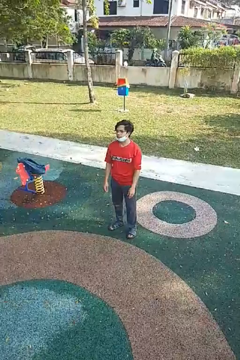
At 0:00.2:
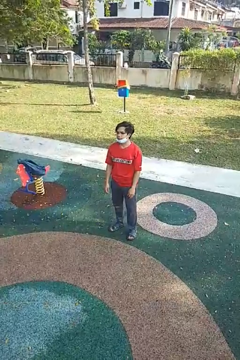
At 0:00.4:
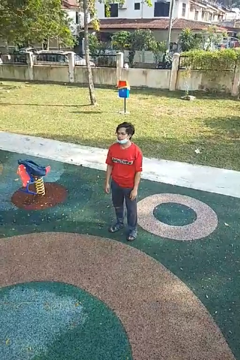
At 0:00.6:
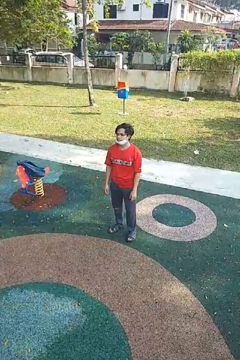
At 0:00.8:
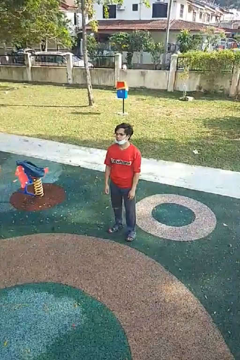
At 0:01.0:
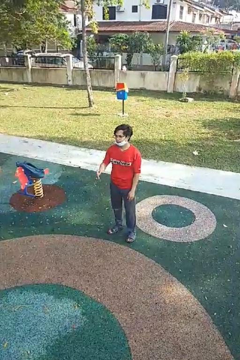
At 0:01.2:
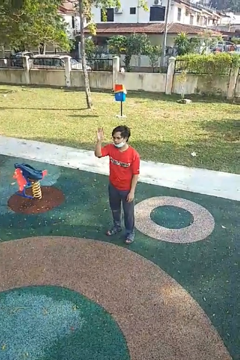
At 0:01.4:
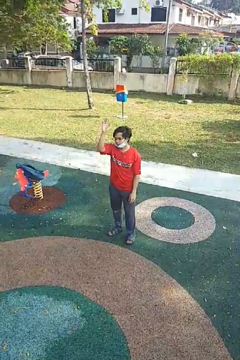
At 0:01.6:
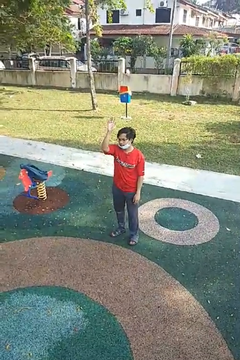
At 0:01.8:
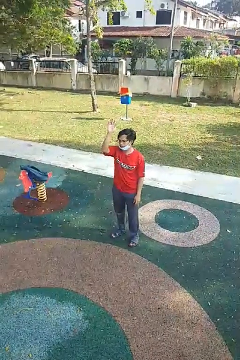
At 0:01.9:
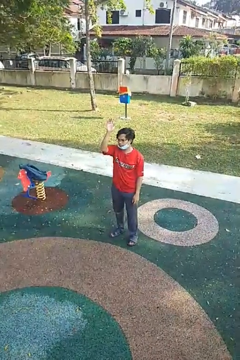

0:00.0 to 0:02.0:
person gestures raise hand

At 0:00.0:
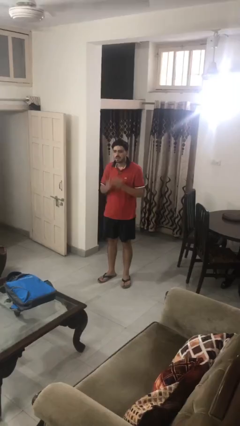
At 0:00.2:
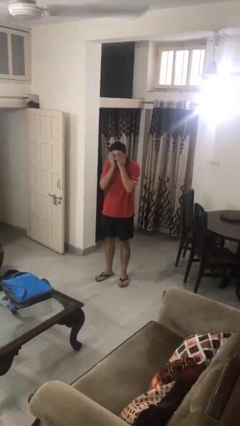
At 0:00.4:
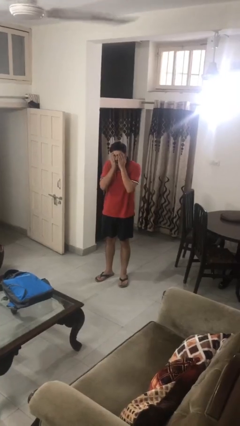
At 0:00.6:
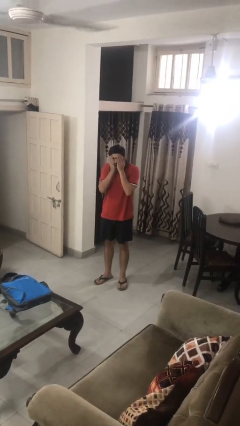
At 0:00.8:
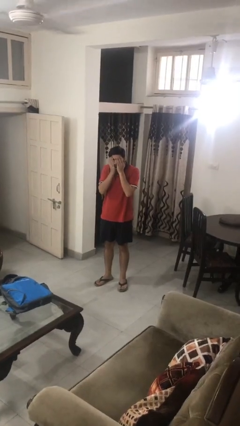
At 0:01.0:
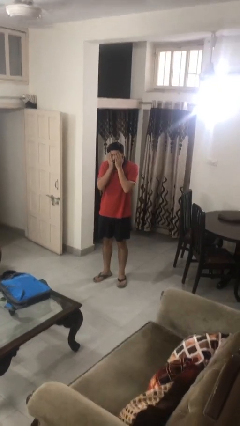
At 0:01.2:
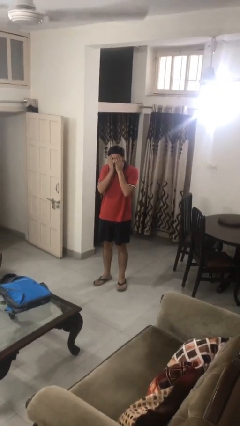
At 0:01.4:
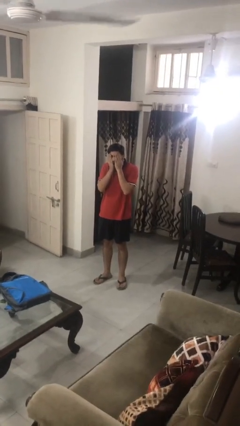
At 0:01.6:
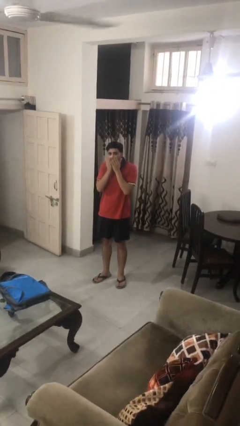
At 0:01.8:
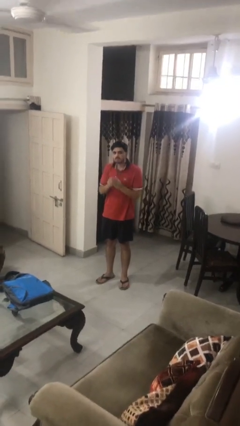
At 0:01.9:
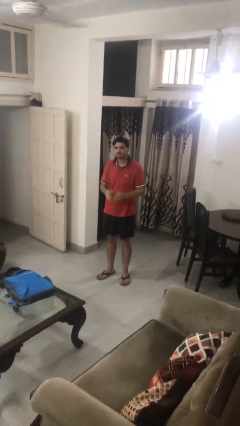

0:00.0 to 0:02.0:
person covers face with hands

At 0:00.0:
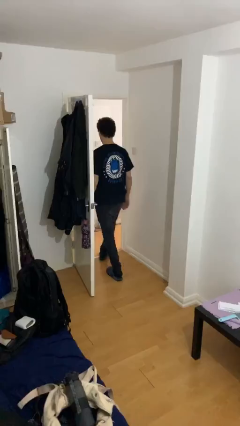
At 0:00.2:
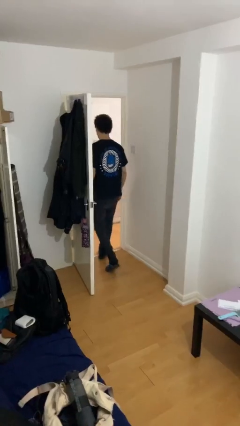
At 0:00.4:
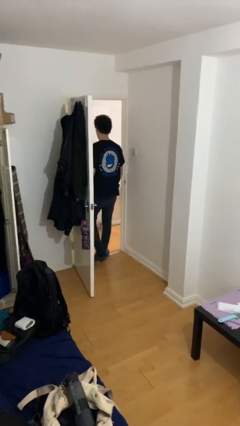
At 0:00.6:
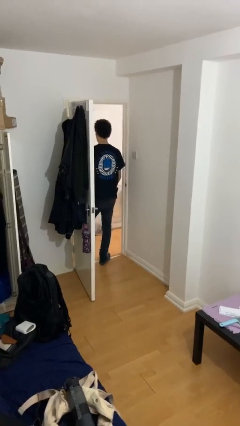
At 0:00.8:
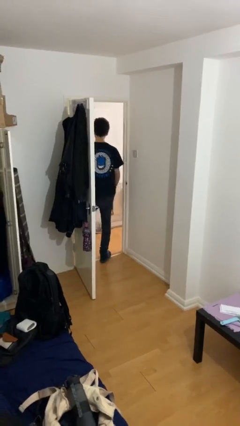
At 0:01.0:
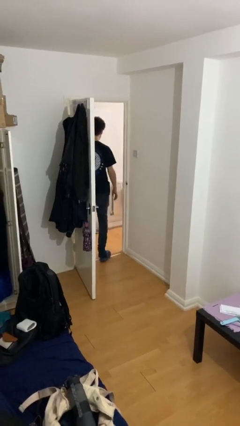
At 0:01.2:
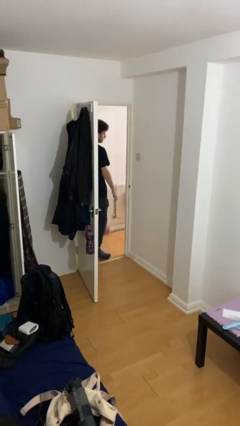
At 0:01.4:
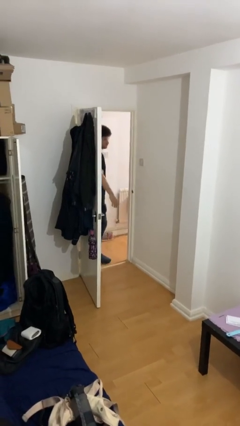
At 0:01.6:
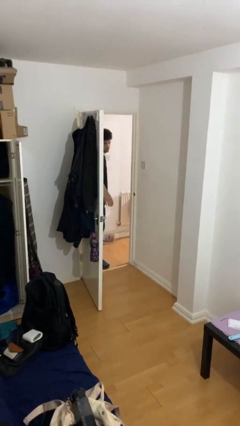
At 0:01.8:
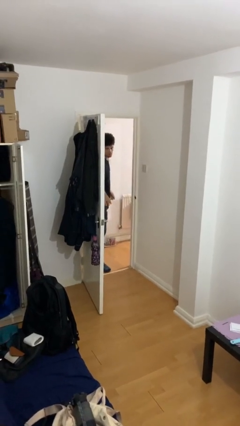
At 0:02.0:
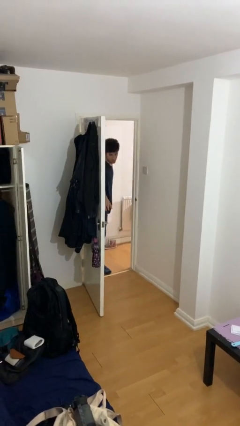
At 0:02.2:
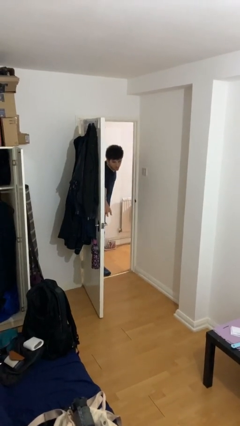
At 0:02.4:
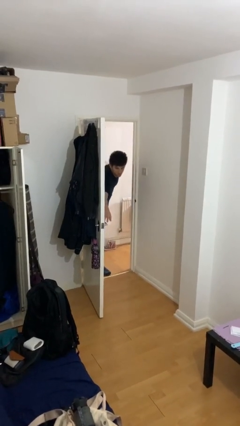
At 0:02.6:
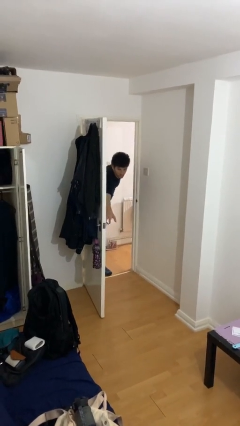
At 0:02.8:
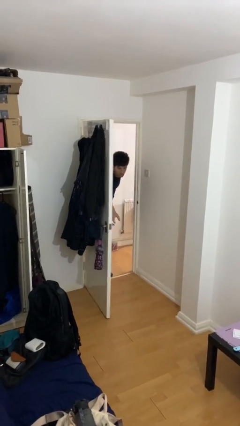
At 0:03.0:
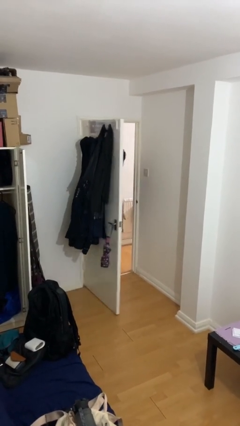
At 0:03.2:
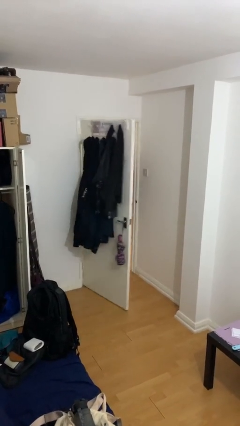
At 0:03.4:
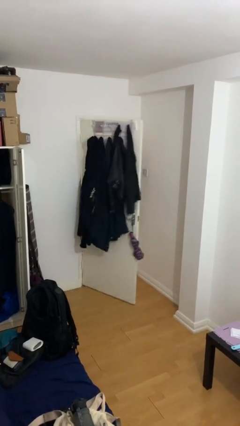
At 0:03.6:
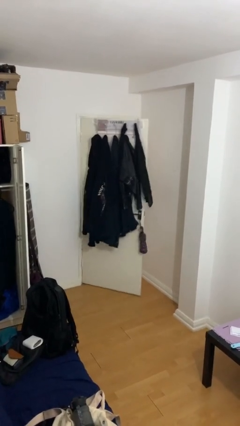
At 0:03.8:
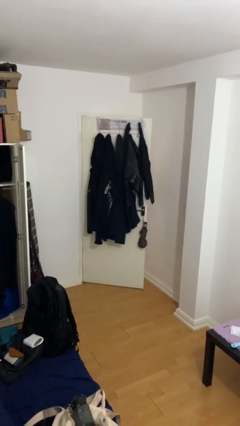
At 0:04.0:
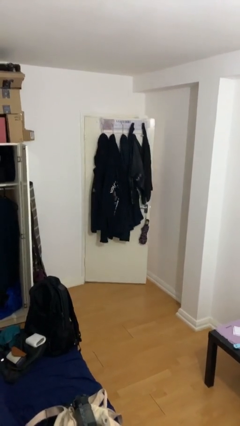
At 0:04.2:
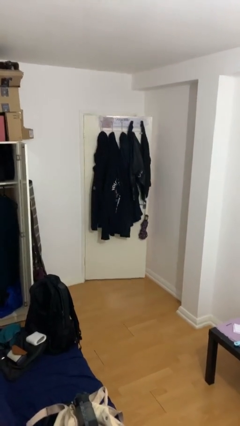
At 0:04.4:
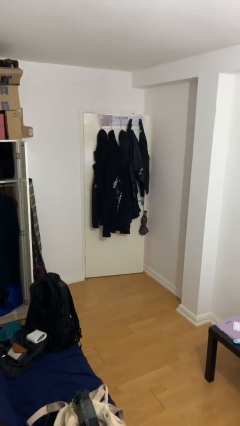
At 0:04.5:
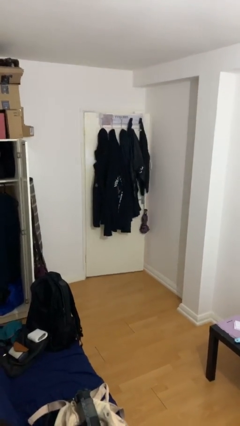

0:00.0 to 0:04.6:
person closes facility door

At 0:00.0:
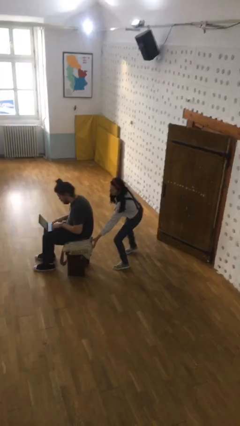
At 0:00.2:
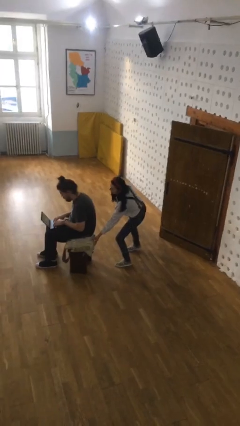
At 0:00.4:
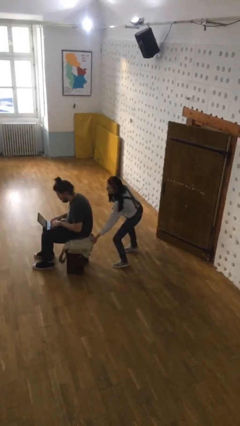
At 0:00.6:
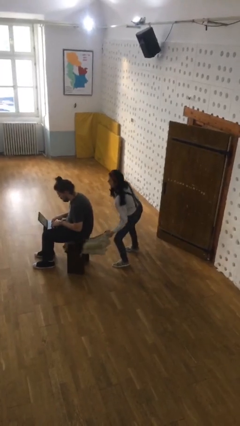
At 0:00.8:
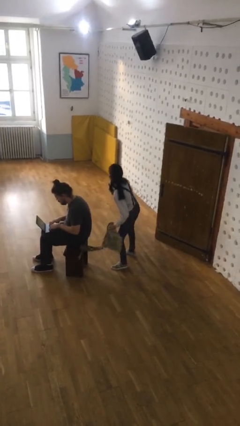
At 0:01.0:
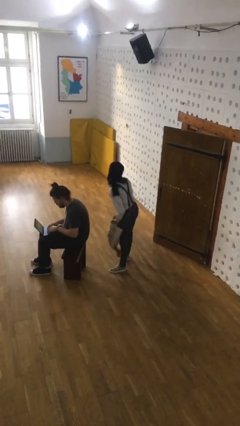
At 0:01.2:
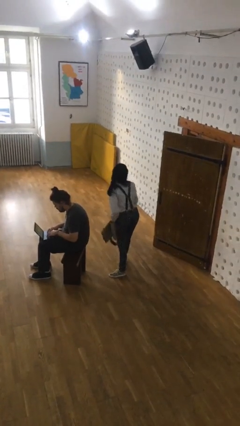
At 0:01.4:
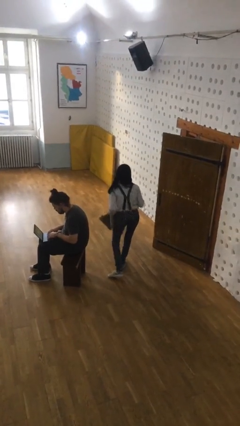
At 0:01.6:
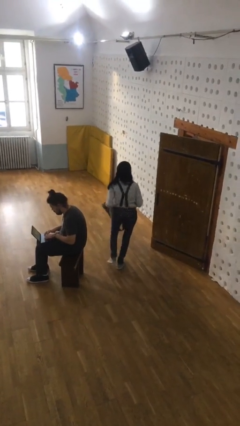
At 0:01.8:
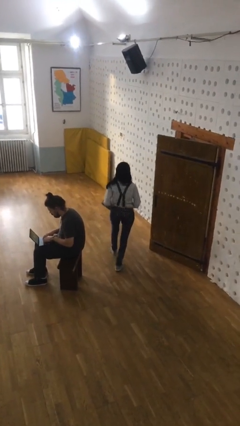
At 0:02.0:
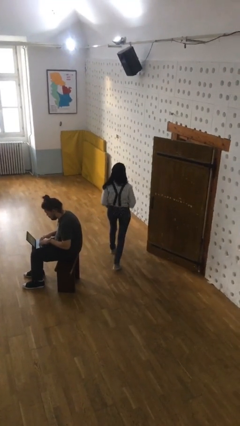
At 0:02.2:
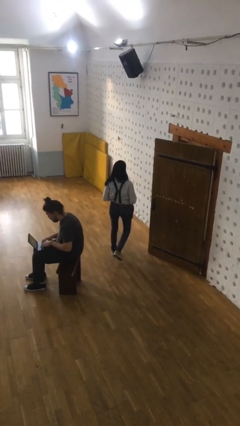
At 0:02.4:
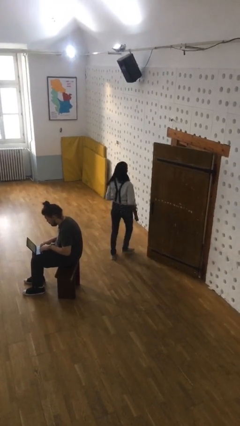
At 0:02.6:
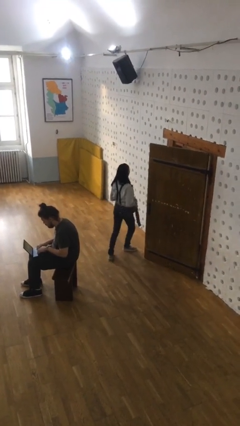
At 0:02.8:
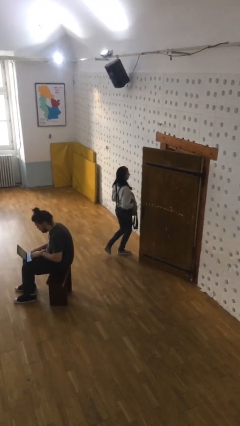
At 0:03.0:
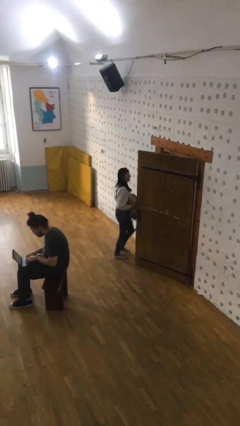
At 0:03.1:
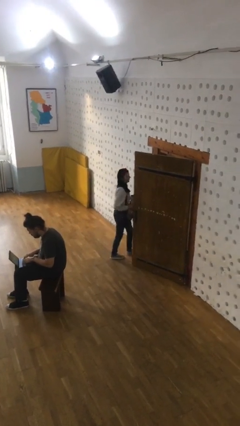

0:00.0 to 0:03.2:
person steals object from person

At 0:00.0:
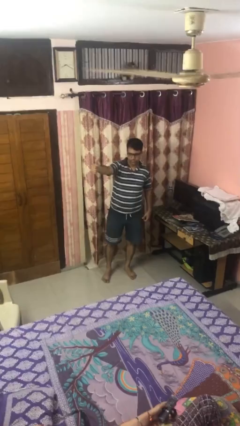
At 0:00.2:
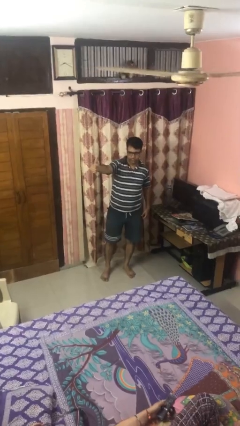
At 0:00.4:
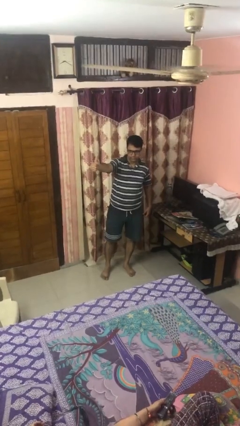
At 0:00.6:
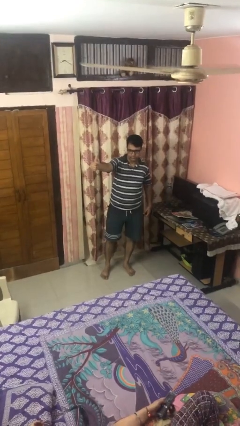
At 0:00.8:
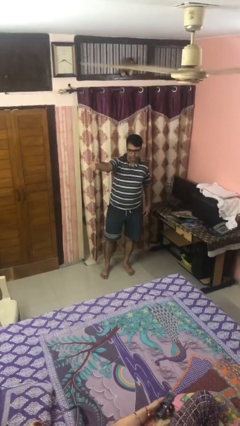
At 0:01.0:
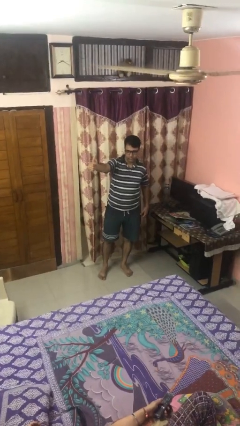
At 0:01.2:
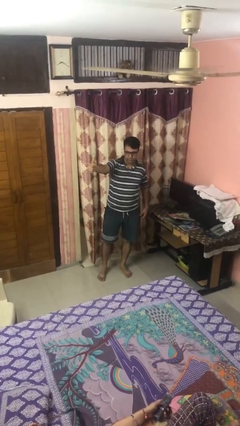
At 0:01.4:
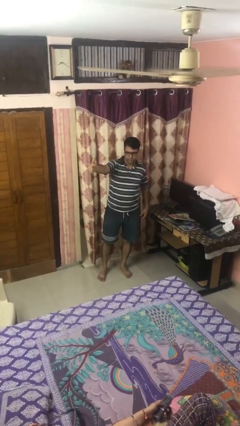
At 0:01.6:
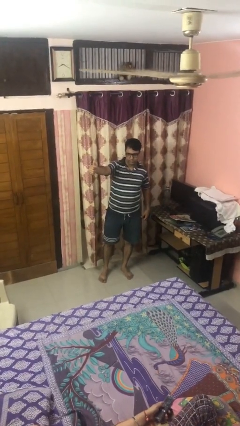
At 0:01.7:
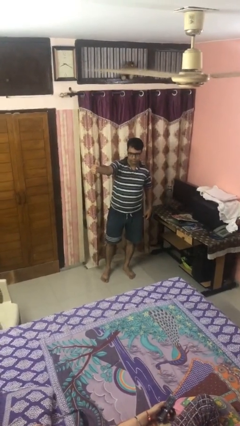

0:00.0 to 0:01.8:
person gestures thumbs up

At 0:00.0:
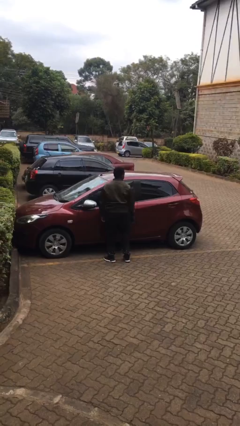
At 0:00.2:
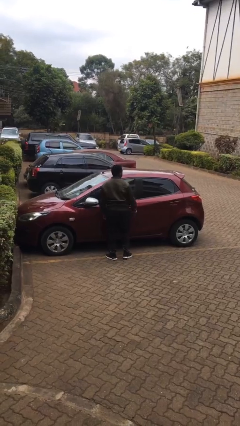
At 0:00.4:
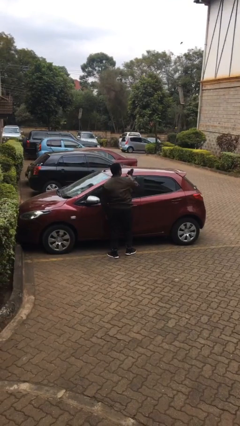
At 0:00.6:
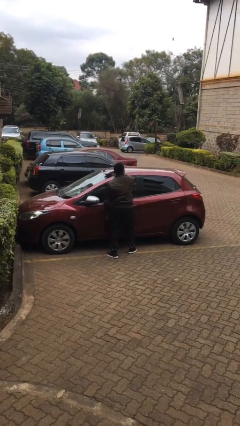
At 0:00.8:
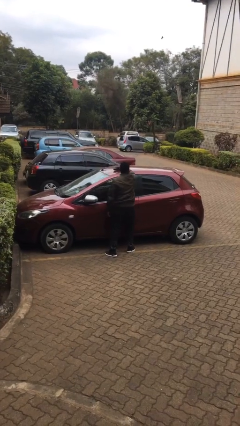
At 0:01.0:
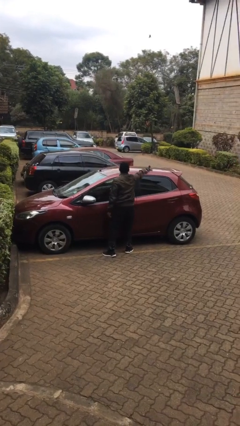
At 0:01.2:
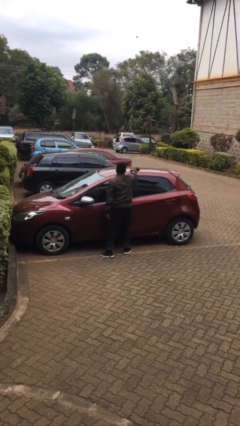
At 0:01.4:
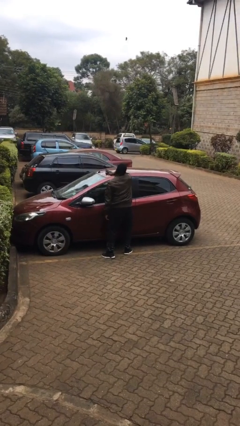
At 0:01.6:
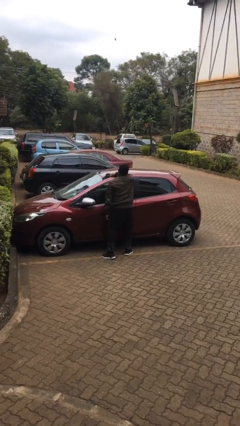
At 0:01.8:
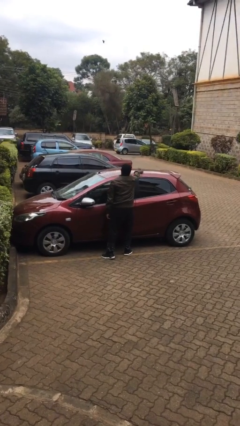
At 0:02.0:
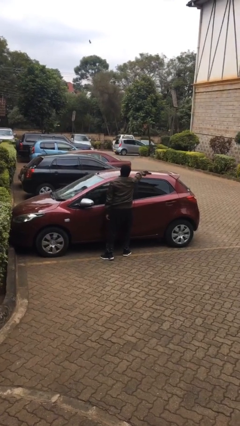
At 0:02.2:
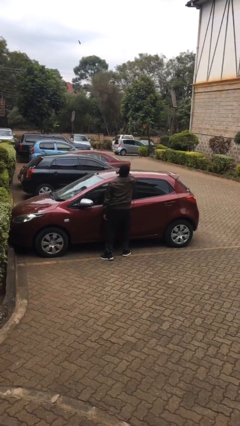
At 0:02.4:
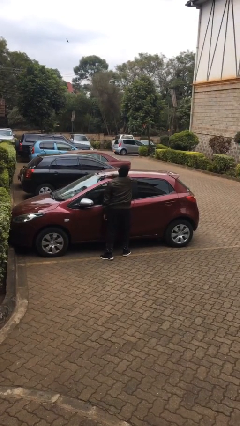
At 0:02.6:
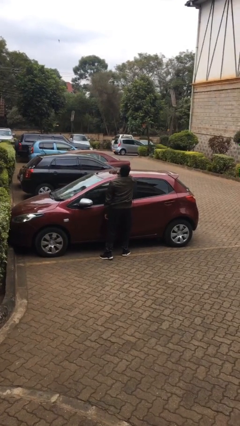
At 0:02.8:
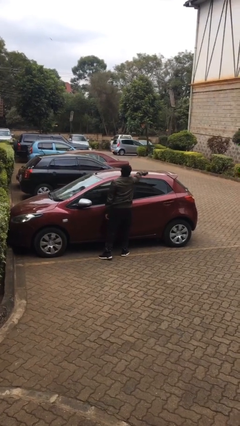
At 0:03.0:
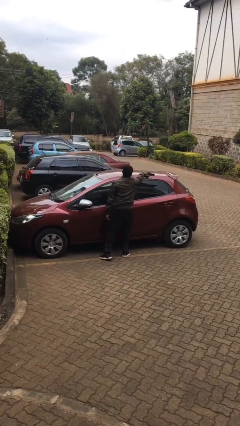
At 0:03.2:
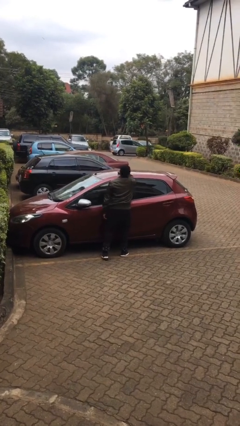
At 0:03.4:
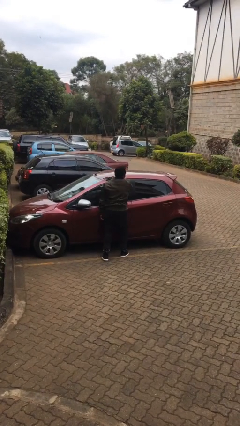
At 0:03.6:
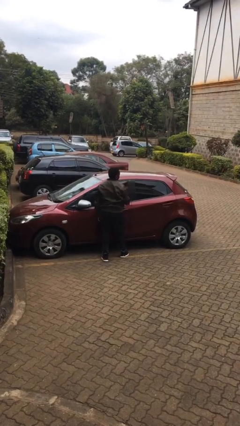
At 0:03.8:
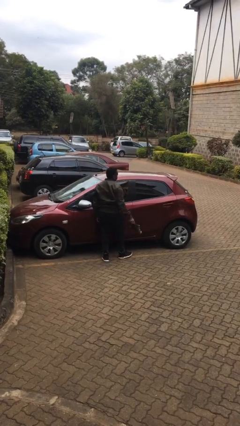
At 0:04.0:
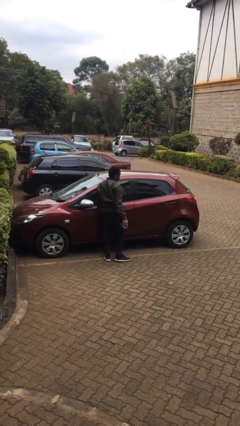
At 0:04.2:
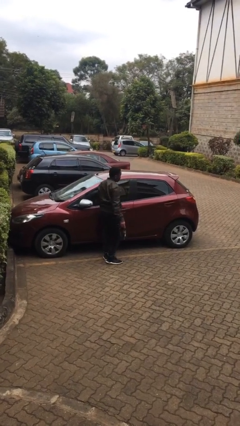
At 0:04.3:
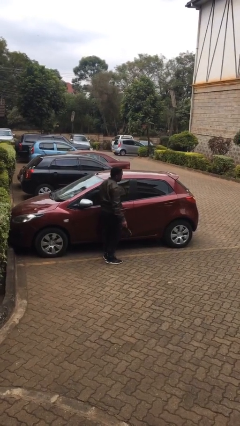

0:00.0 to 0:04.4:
person polishes car with rag
